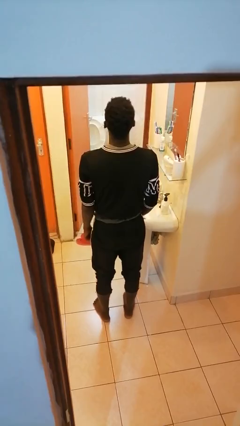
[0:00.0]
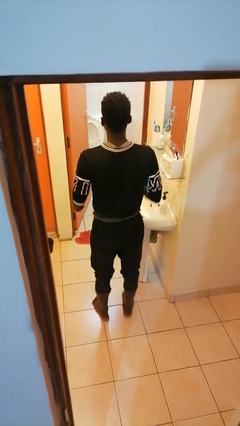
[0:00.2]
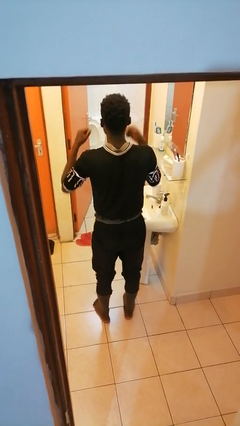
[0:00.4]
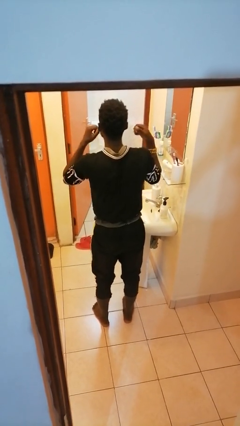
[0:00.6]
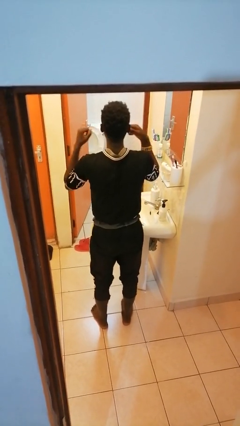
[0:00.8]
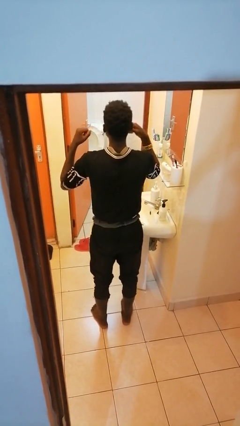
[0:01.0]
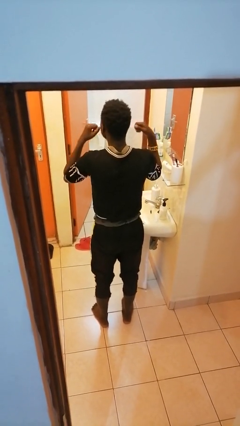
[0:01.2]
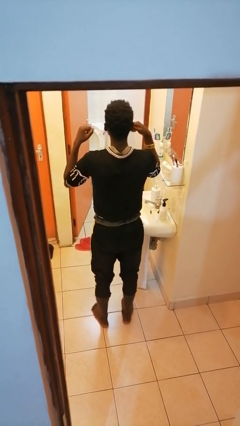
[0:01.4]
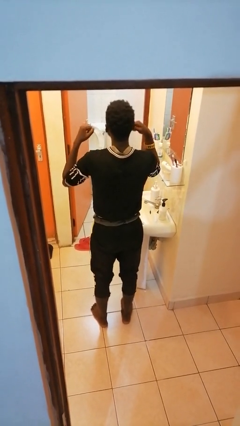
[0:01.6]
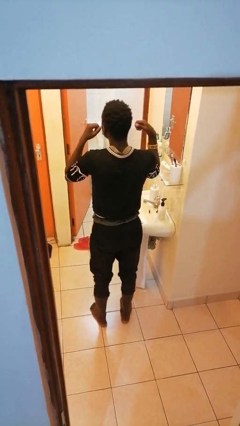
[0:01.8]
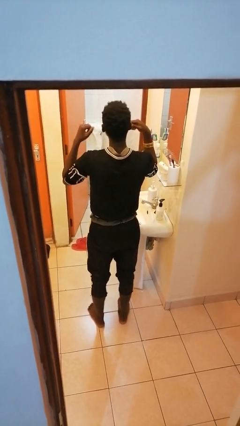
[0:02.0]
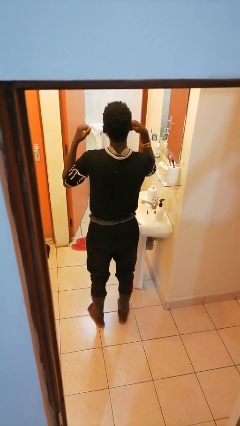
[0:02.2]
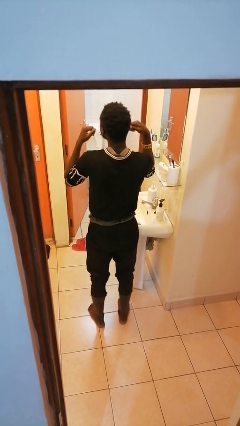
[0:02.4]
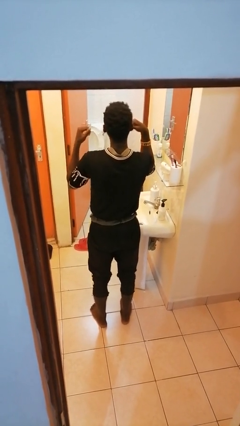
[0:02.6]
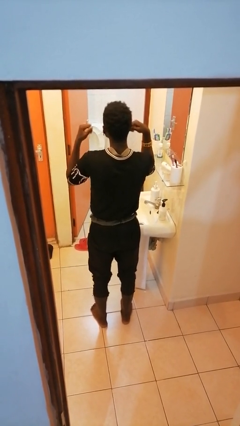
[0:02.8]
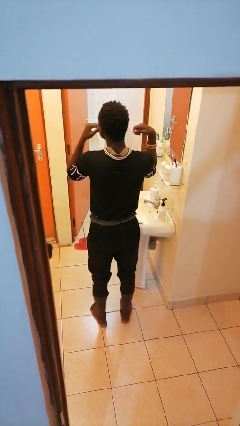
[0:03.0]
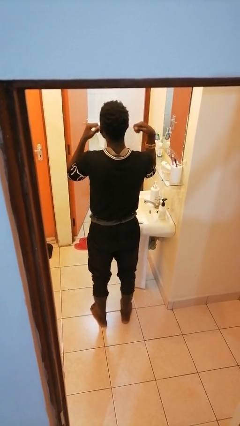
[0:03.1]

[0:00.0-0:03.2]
person flosses

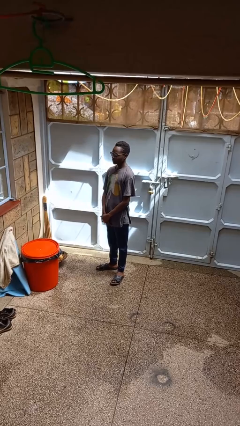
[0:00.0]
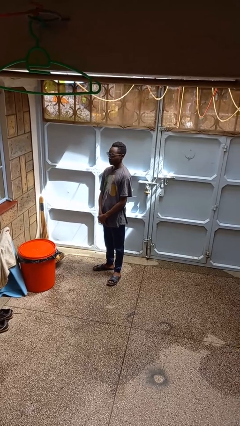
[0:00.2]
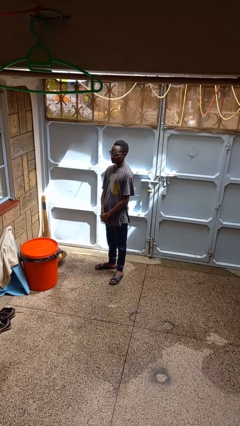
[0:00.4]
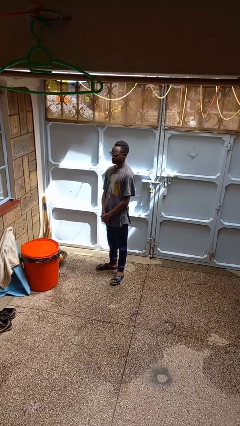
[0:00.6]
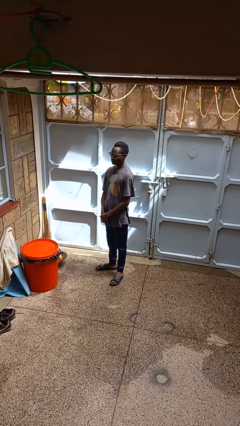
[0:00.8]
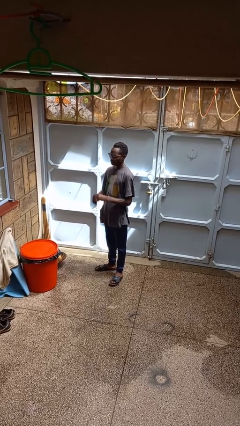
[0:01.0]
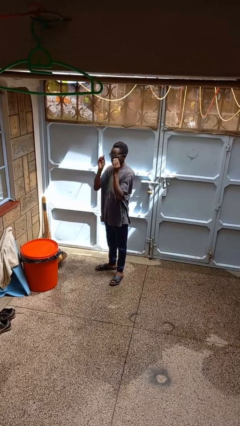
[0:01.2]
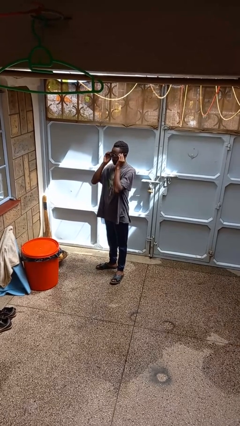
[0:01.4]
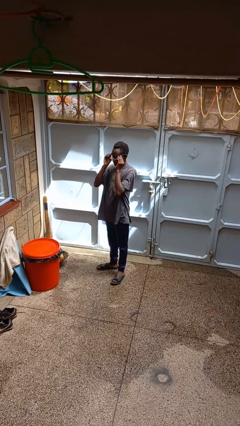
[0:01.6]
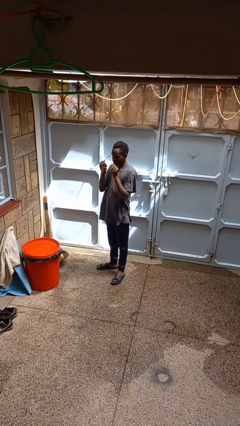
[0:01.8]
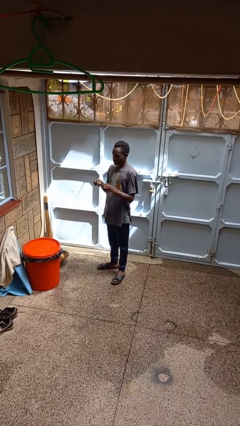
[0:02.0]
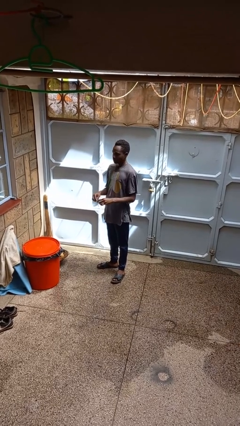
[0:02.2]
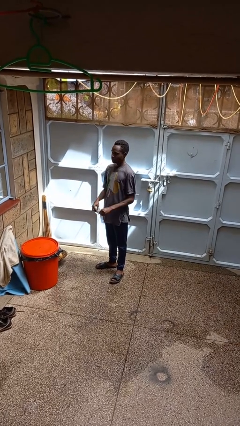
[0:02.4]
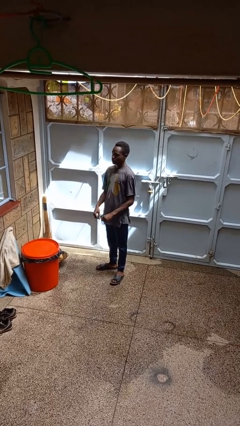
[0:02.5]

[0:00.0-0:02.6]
person takes off glasses

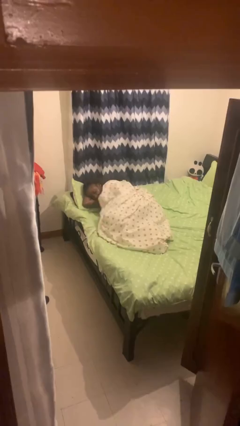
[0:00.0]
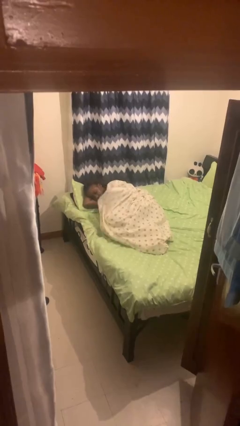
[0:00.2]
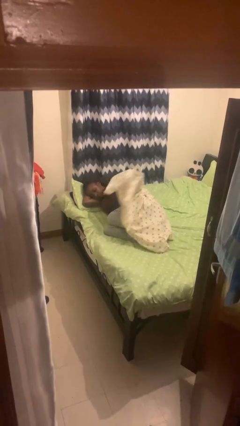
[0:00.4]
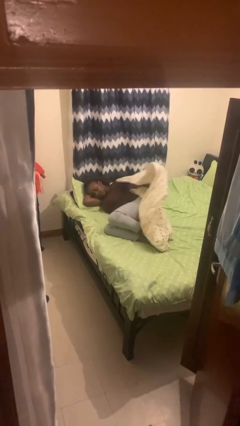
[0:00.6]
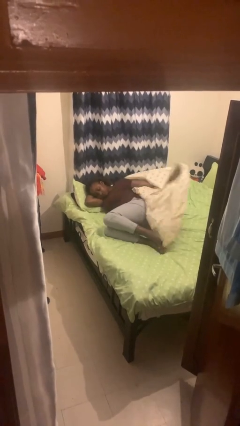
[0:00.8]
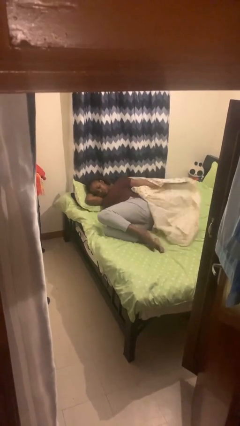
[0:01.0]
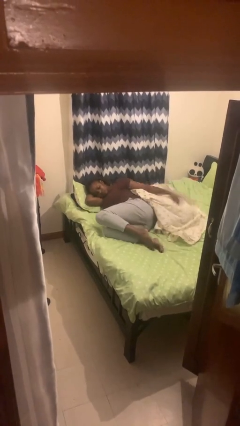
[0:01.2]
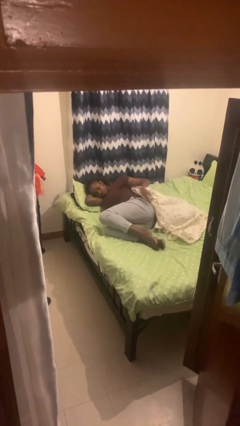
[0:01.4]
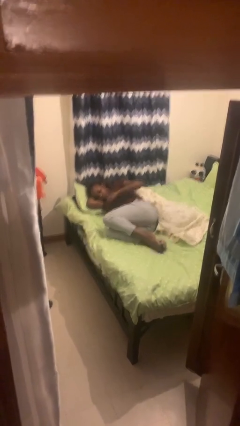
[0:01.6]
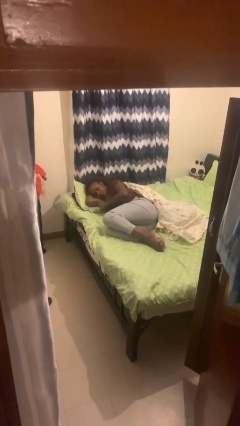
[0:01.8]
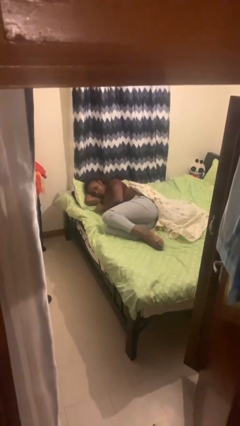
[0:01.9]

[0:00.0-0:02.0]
person uncovers with bedsheets

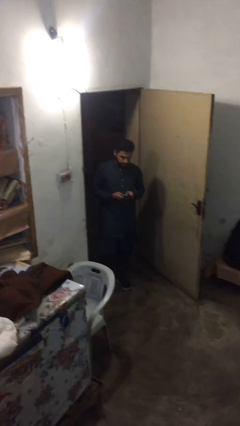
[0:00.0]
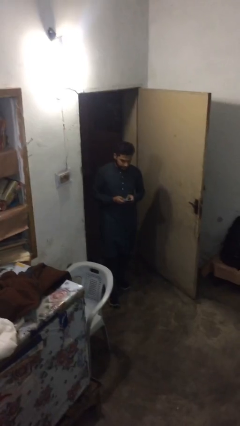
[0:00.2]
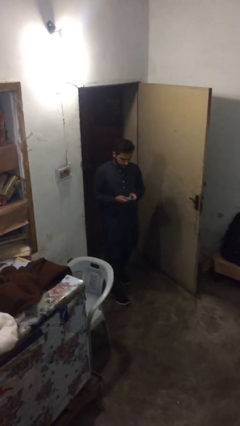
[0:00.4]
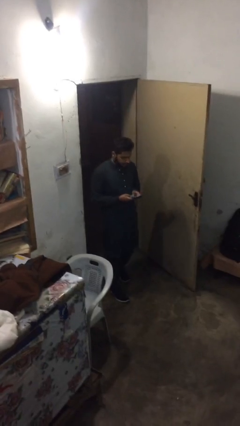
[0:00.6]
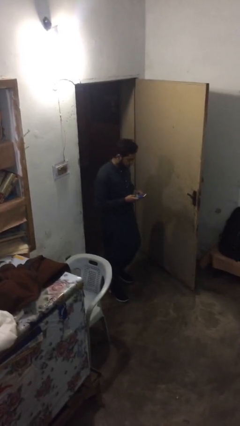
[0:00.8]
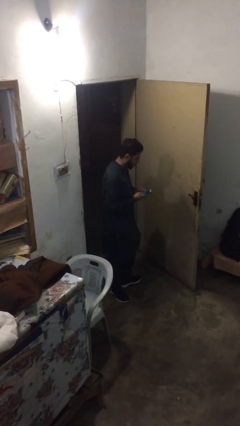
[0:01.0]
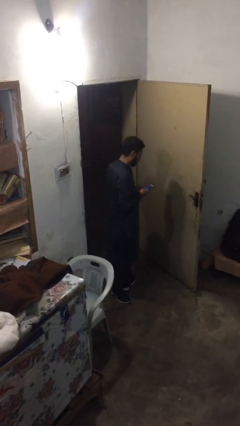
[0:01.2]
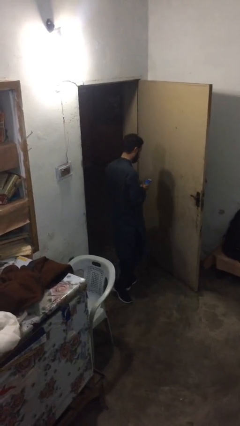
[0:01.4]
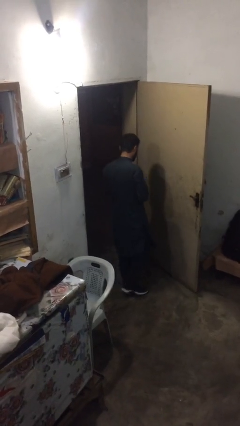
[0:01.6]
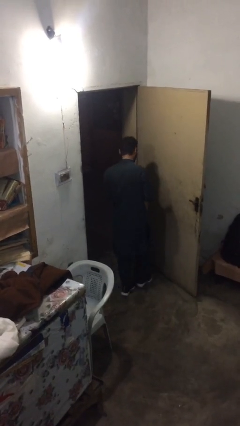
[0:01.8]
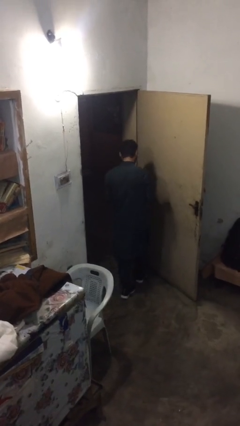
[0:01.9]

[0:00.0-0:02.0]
person exits scene through structure

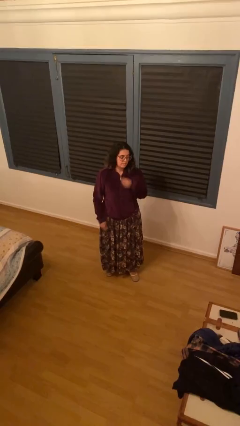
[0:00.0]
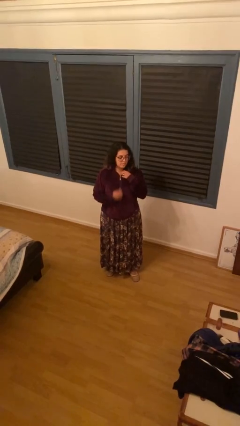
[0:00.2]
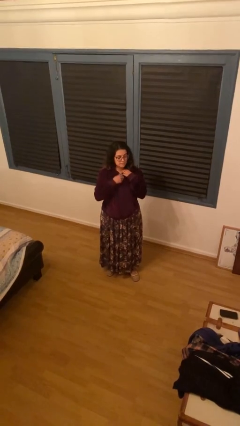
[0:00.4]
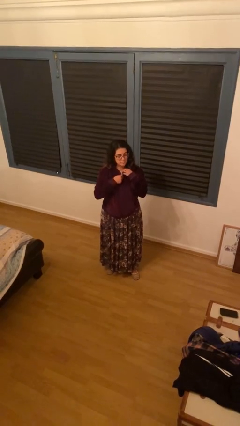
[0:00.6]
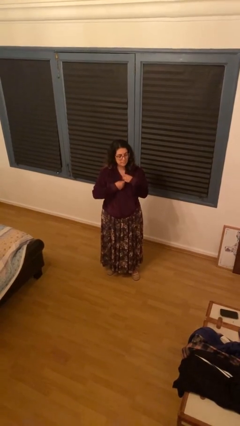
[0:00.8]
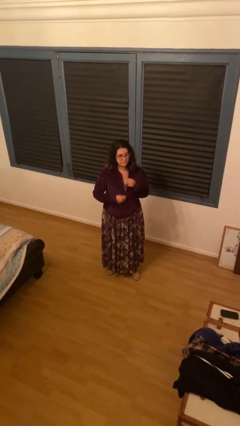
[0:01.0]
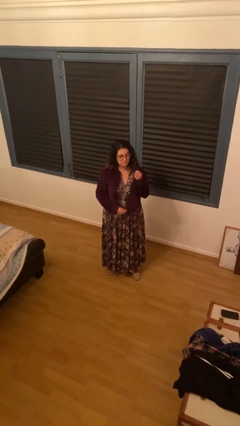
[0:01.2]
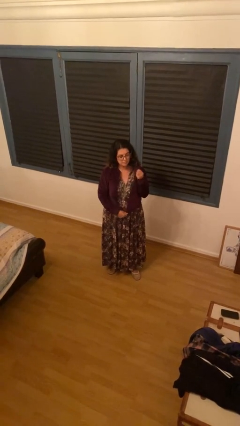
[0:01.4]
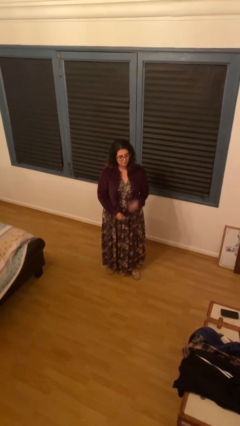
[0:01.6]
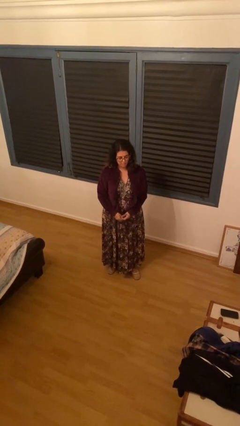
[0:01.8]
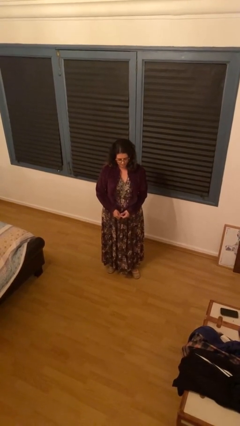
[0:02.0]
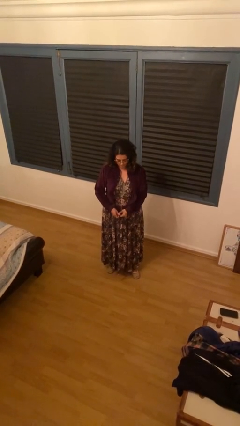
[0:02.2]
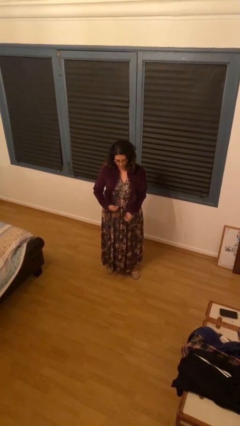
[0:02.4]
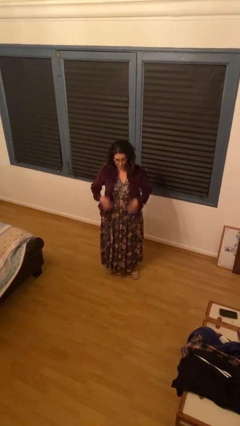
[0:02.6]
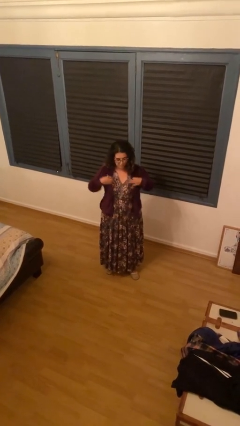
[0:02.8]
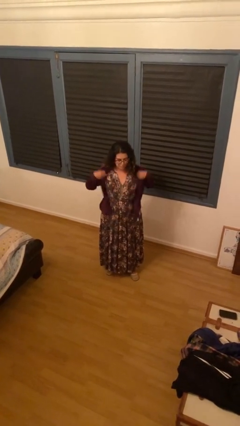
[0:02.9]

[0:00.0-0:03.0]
person unzips jacket

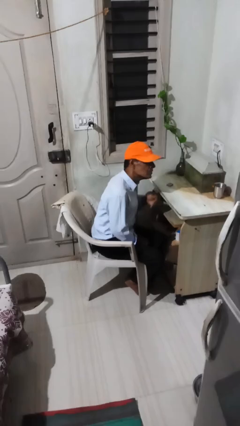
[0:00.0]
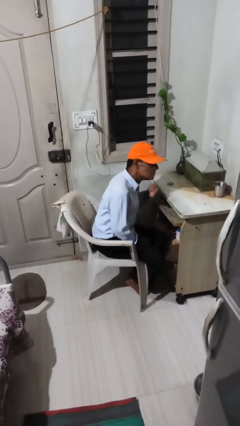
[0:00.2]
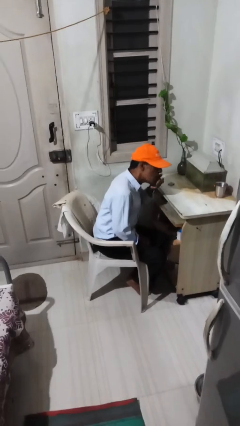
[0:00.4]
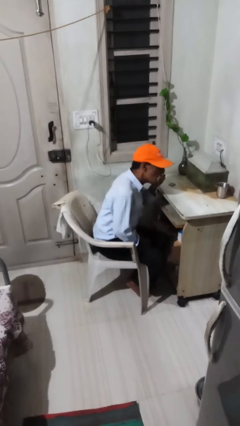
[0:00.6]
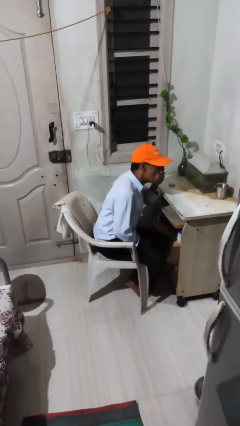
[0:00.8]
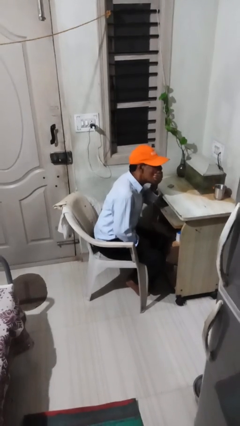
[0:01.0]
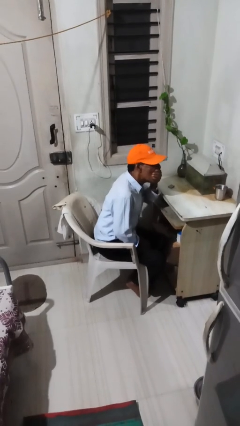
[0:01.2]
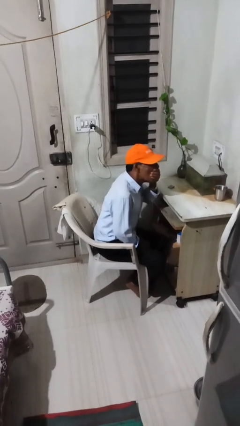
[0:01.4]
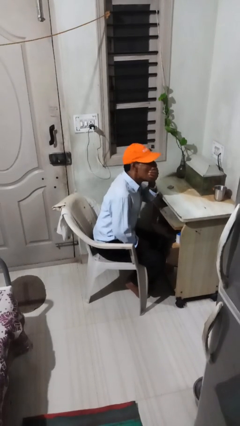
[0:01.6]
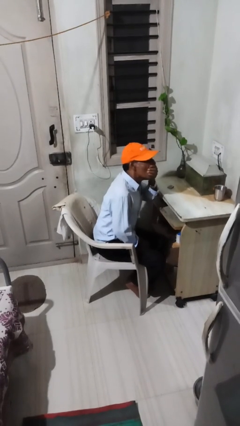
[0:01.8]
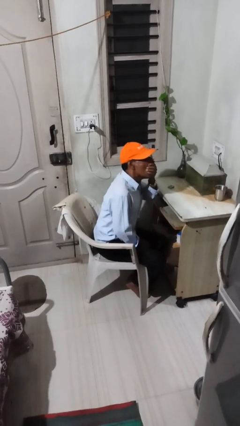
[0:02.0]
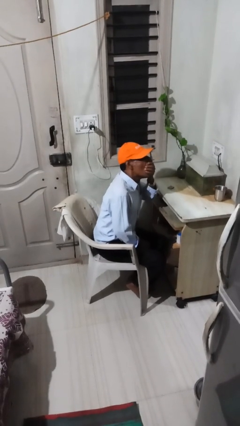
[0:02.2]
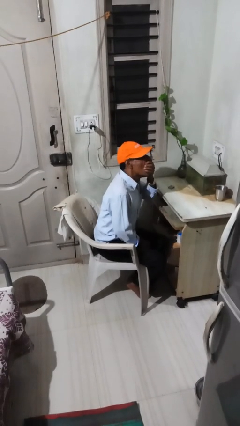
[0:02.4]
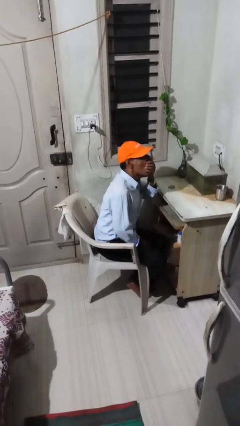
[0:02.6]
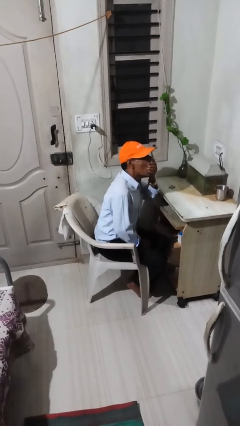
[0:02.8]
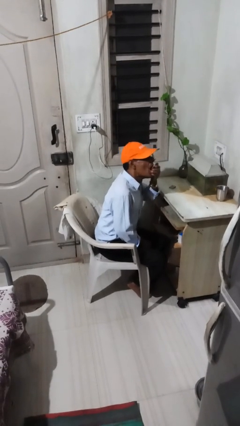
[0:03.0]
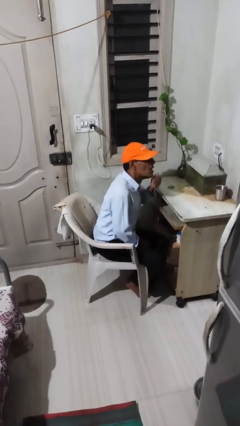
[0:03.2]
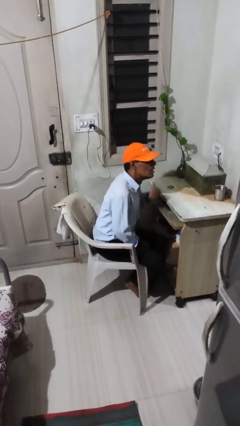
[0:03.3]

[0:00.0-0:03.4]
person yawns

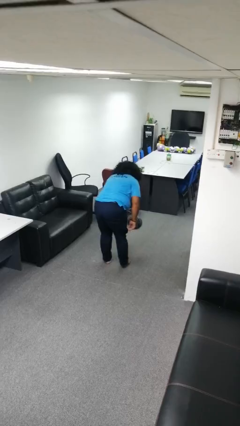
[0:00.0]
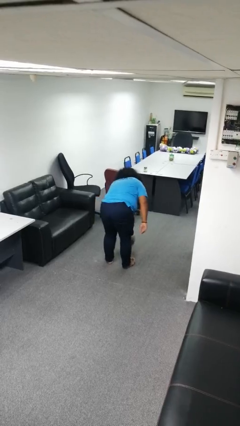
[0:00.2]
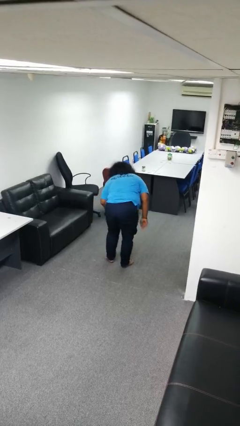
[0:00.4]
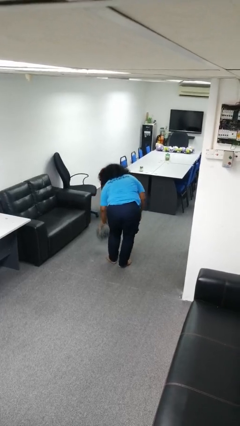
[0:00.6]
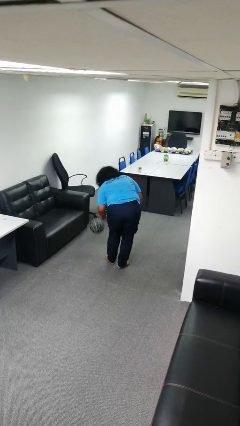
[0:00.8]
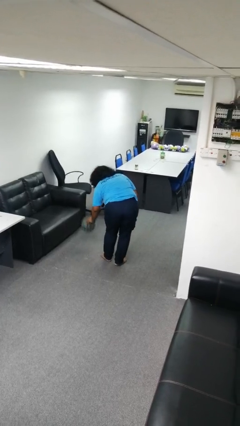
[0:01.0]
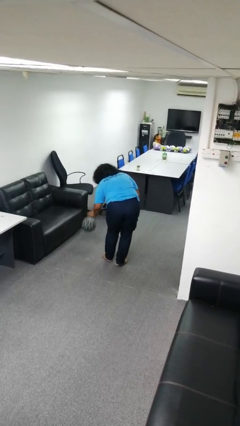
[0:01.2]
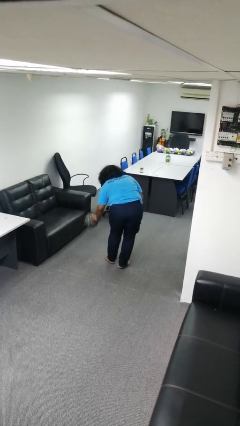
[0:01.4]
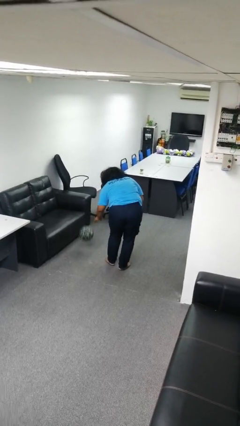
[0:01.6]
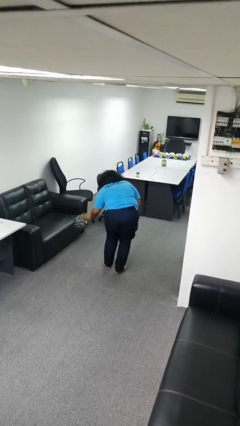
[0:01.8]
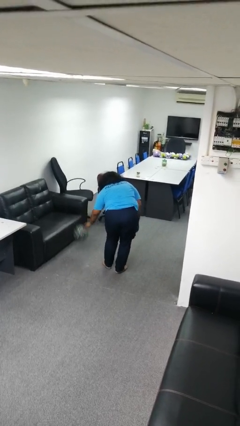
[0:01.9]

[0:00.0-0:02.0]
person bounces ball on floor
